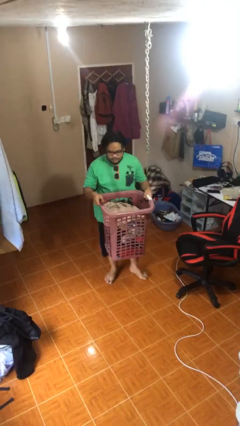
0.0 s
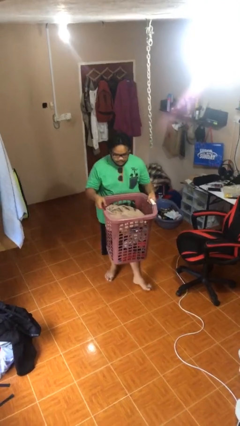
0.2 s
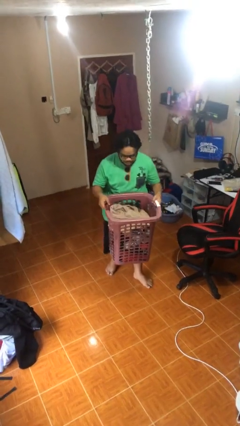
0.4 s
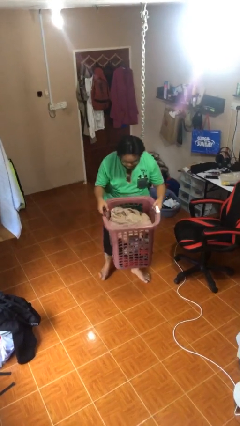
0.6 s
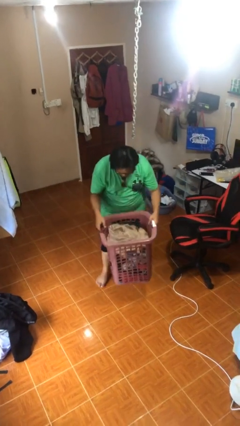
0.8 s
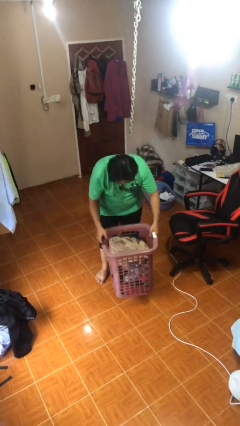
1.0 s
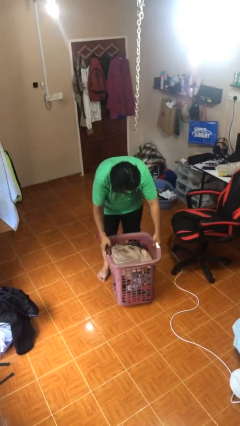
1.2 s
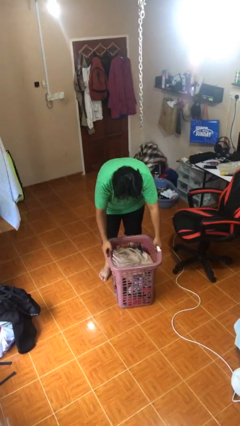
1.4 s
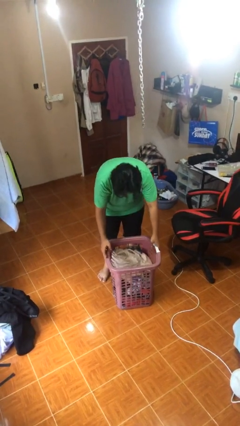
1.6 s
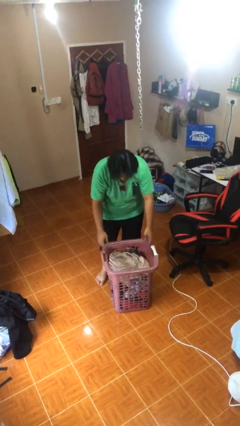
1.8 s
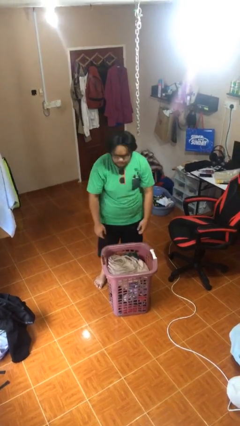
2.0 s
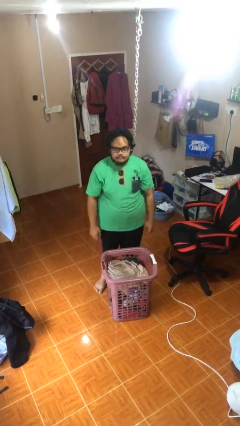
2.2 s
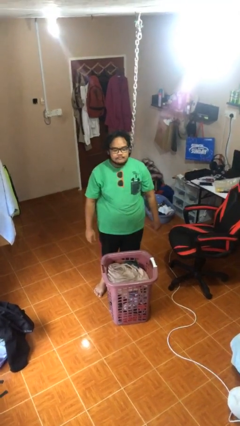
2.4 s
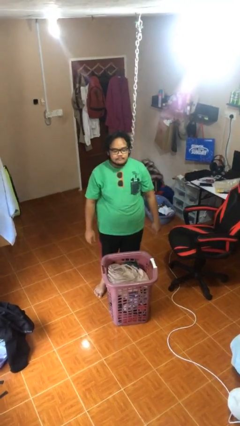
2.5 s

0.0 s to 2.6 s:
person puts down object on floor

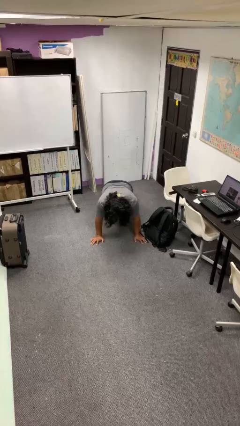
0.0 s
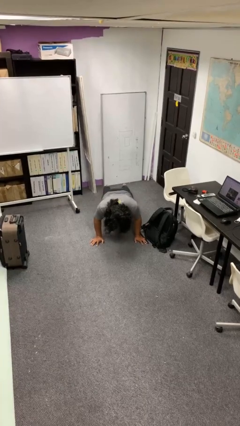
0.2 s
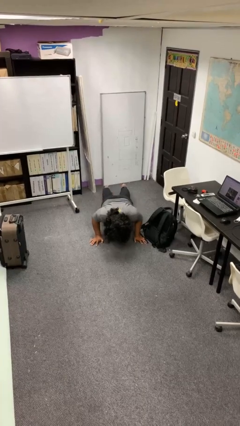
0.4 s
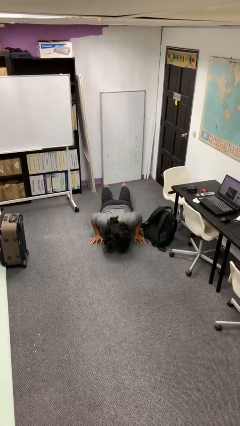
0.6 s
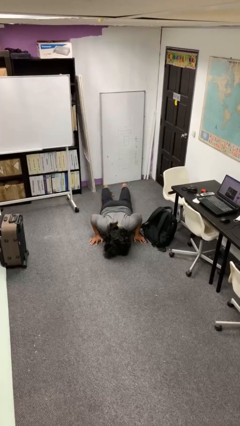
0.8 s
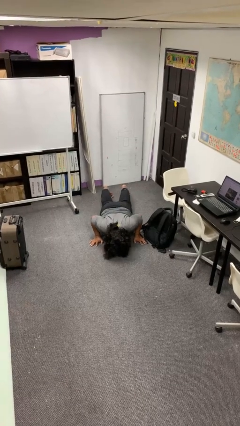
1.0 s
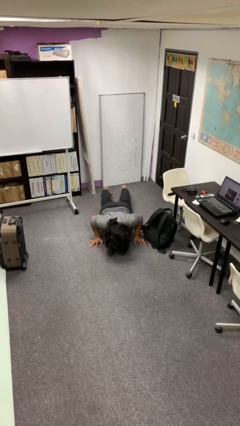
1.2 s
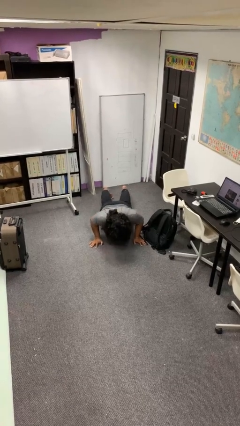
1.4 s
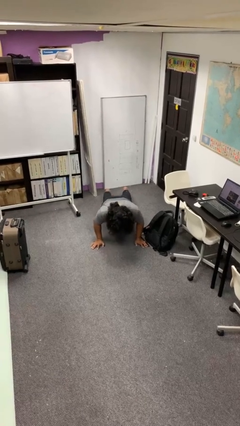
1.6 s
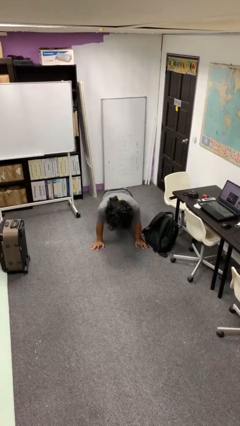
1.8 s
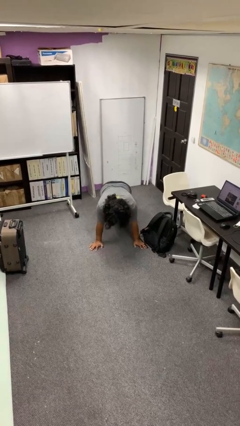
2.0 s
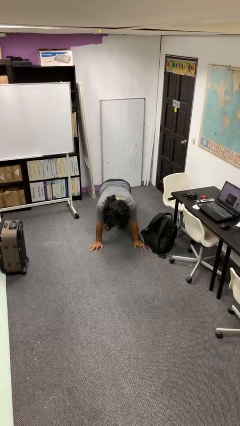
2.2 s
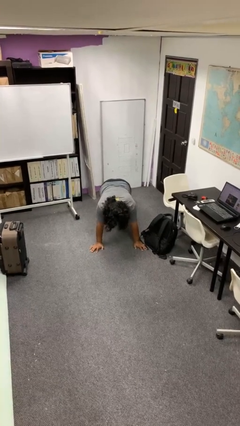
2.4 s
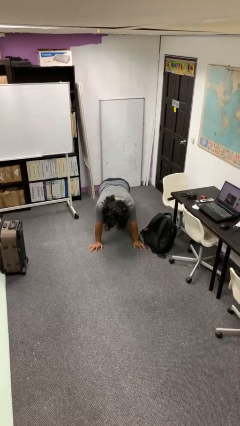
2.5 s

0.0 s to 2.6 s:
person exercises with pushup

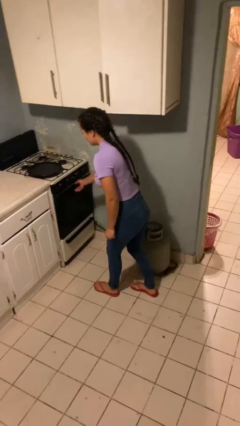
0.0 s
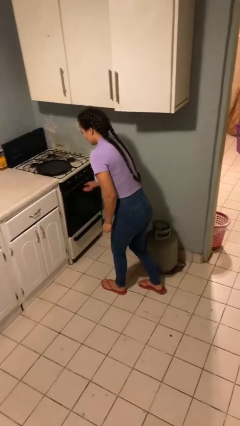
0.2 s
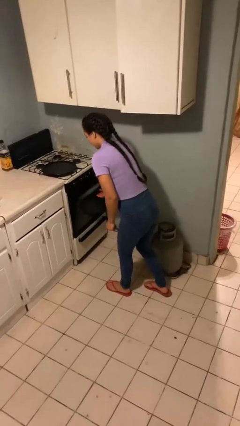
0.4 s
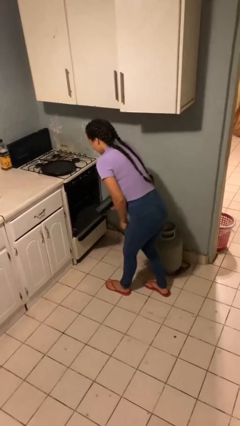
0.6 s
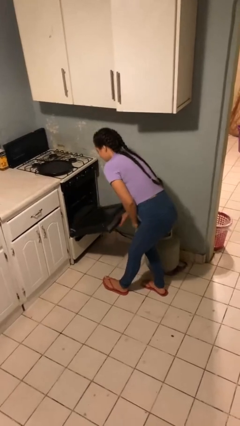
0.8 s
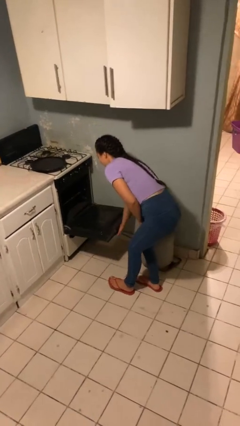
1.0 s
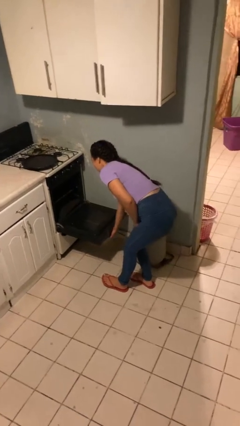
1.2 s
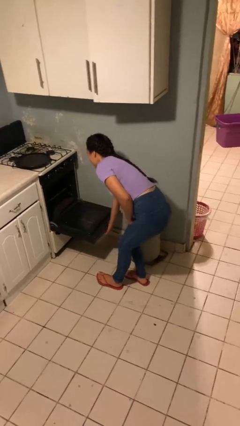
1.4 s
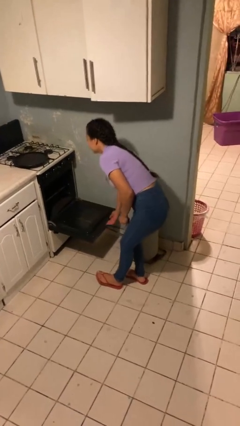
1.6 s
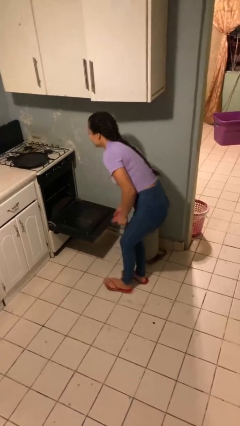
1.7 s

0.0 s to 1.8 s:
person opens oven door

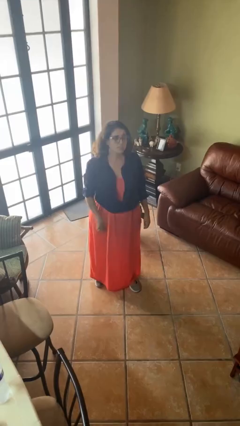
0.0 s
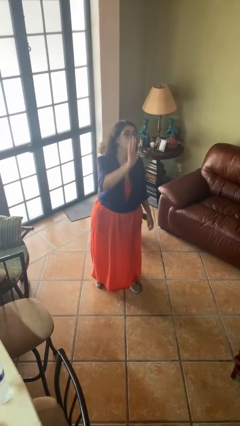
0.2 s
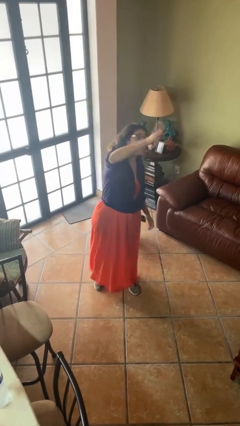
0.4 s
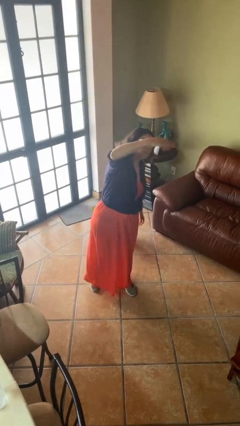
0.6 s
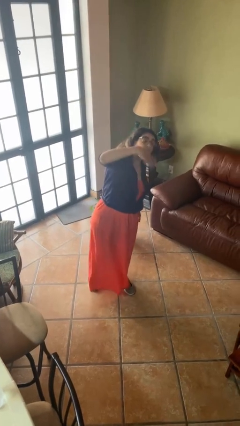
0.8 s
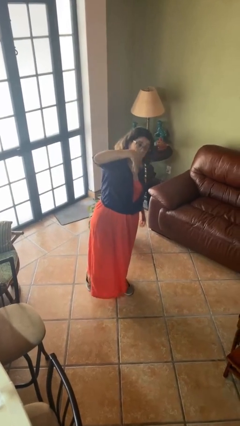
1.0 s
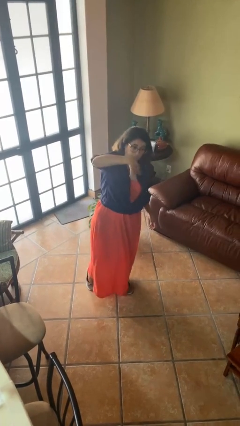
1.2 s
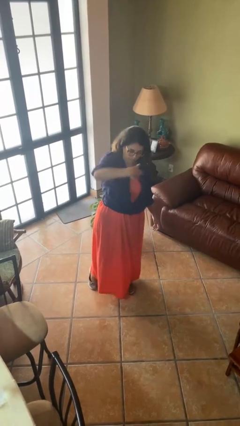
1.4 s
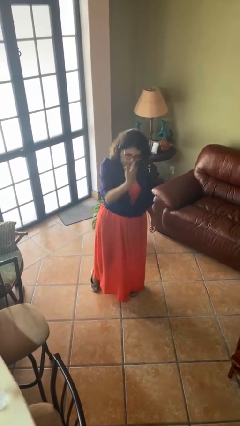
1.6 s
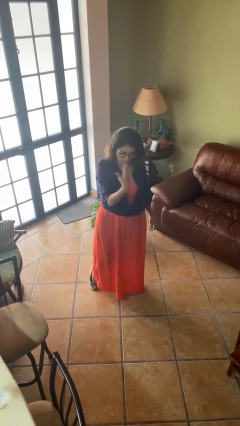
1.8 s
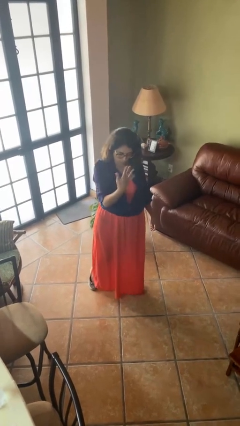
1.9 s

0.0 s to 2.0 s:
person gestures come here

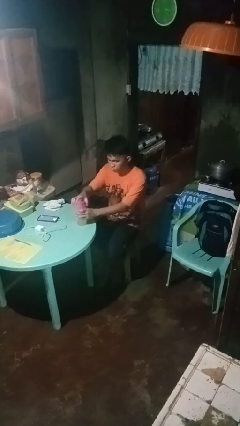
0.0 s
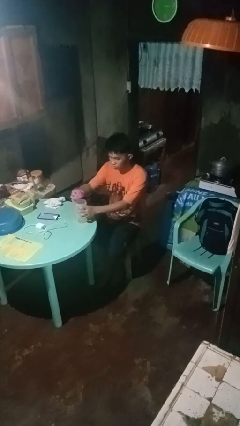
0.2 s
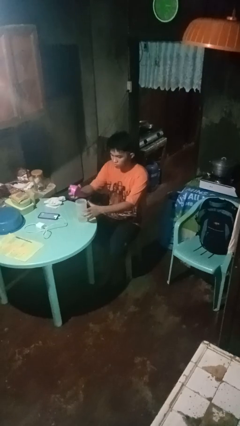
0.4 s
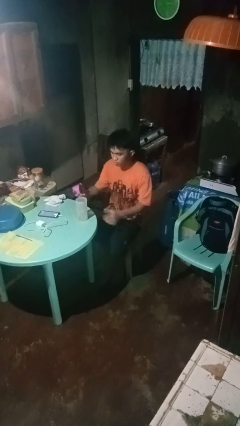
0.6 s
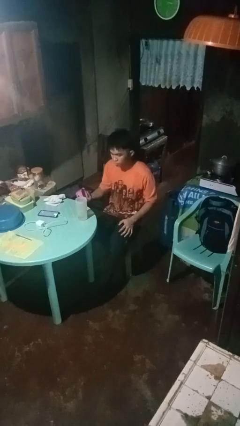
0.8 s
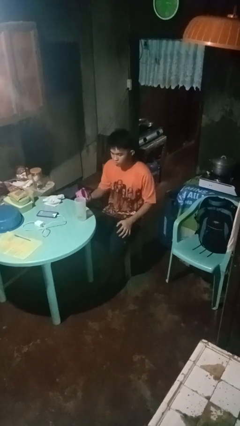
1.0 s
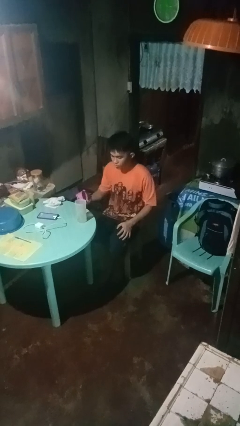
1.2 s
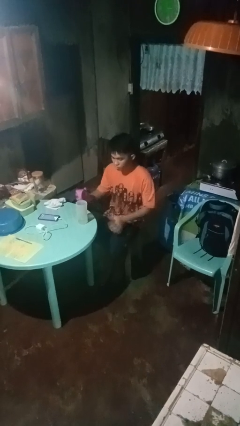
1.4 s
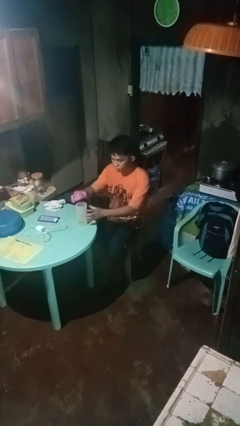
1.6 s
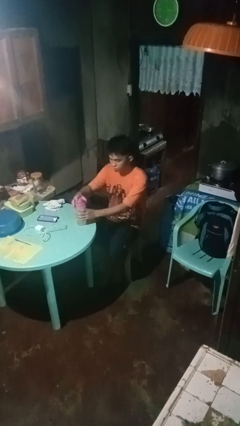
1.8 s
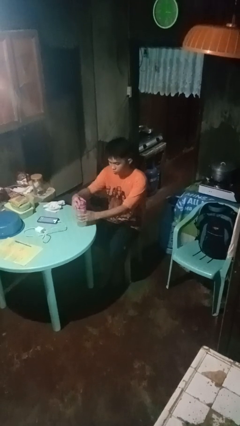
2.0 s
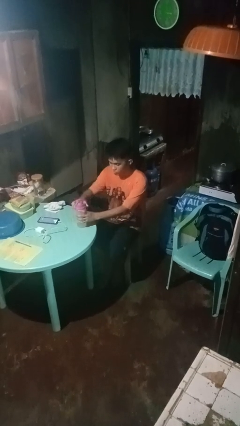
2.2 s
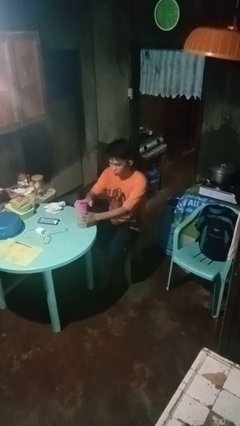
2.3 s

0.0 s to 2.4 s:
person unscrews lid from bottle

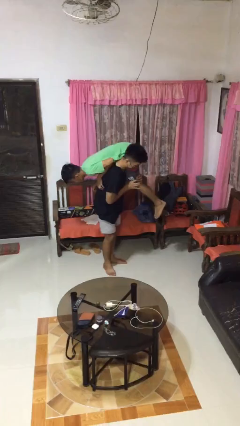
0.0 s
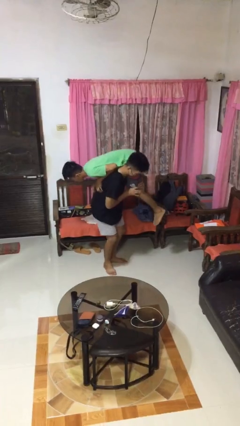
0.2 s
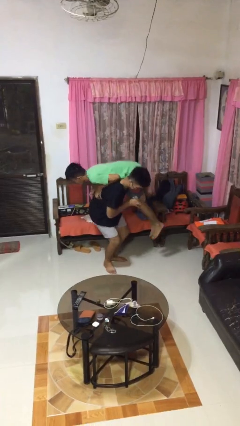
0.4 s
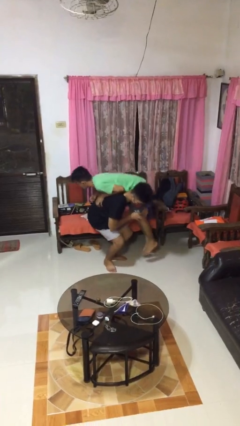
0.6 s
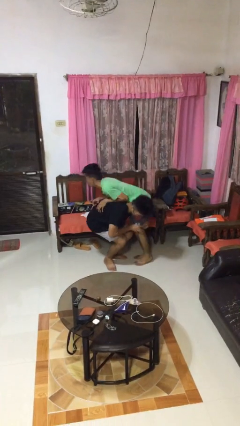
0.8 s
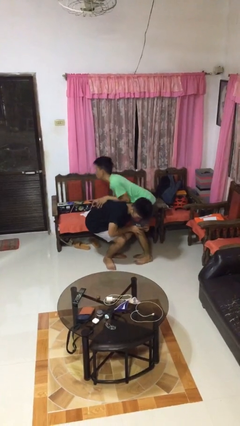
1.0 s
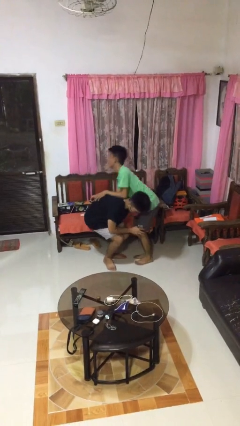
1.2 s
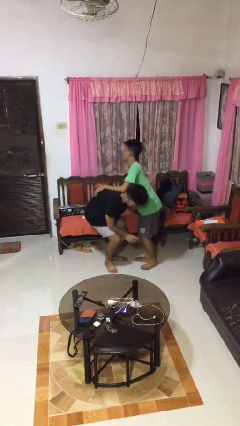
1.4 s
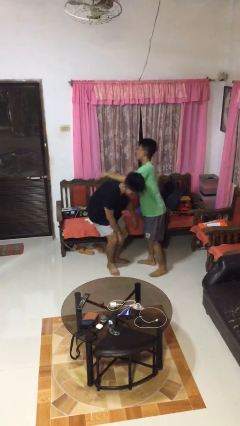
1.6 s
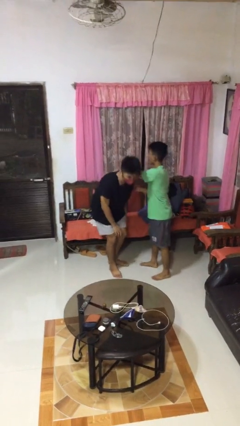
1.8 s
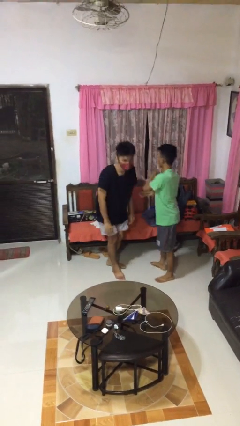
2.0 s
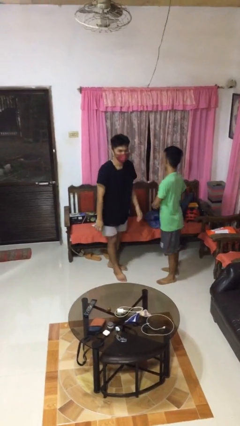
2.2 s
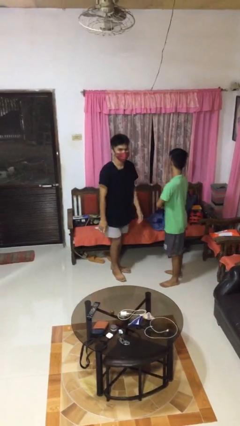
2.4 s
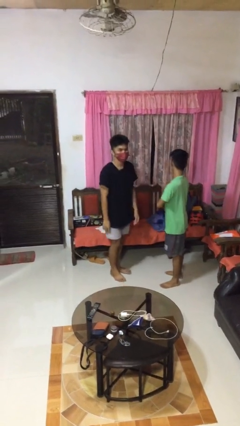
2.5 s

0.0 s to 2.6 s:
person puts down person

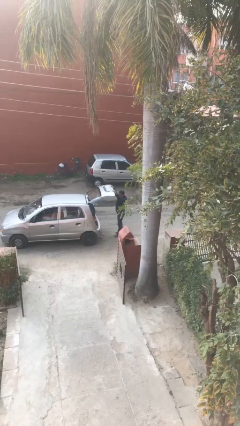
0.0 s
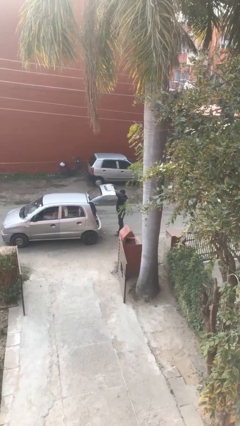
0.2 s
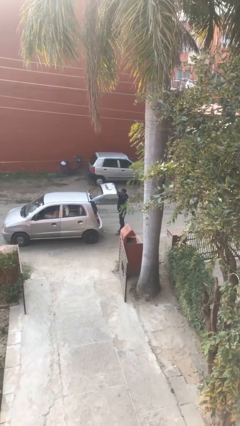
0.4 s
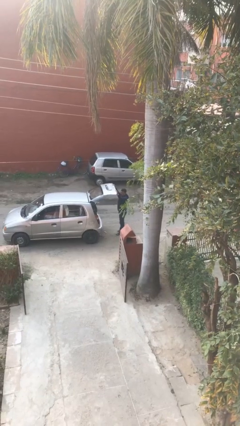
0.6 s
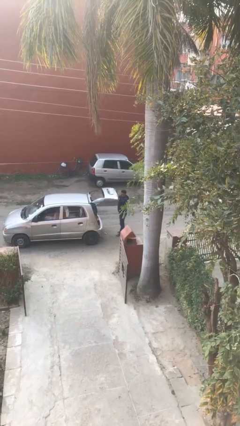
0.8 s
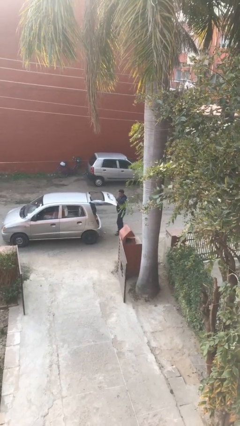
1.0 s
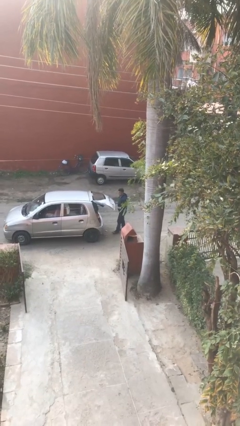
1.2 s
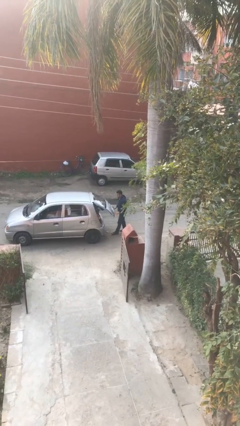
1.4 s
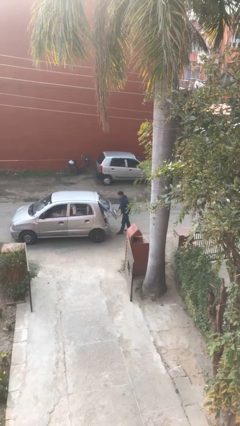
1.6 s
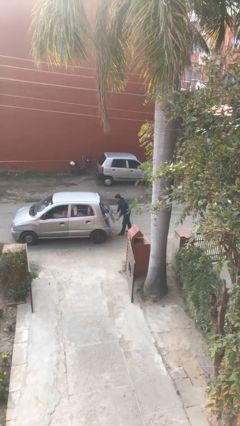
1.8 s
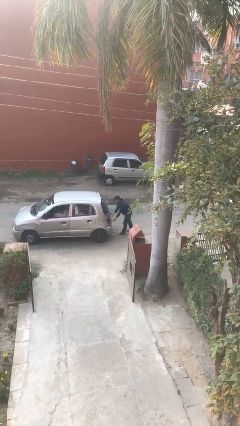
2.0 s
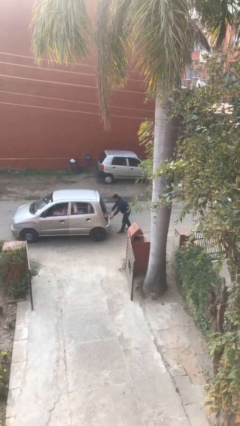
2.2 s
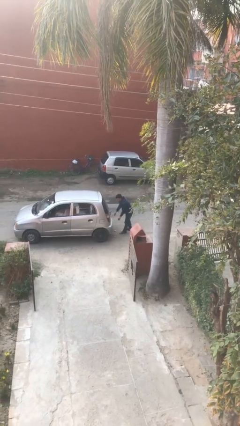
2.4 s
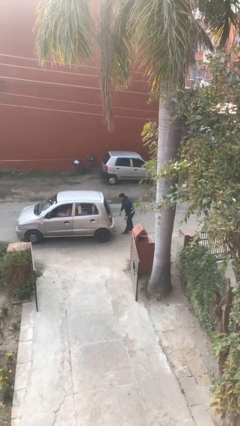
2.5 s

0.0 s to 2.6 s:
person closes car trunk
